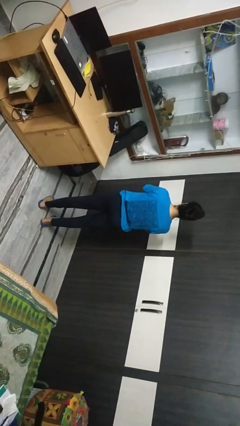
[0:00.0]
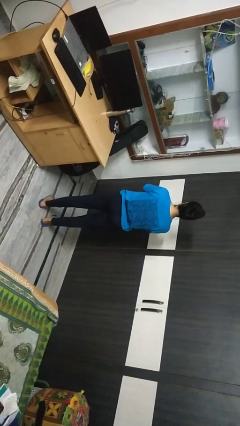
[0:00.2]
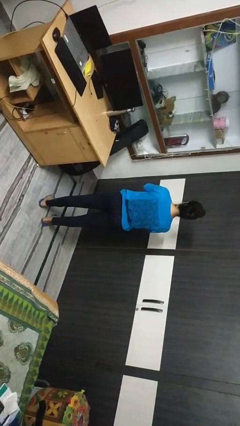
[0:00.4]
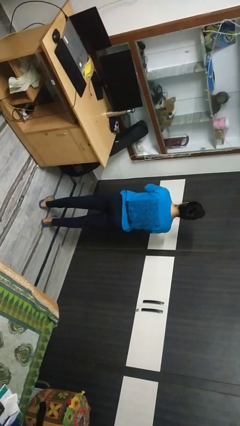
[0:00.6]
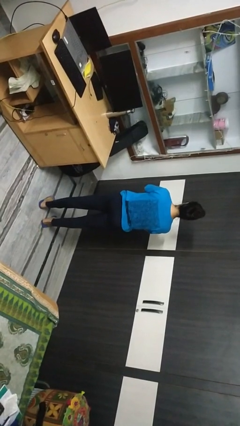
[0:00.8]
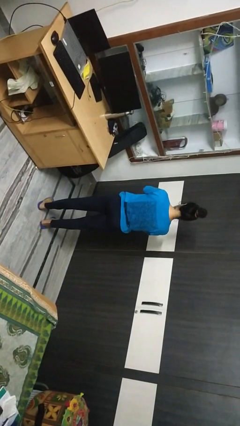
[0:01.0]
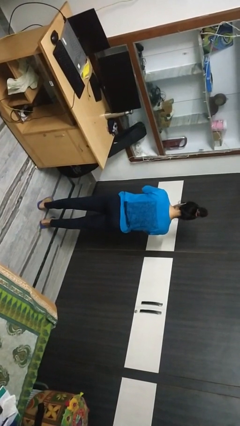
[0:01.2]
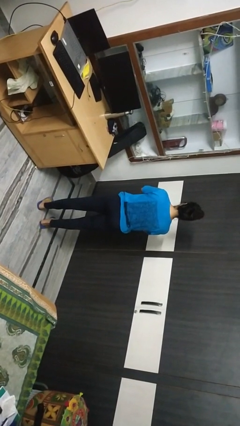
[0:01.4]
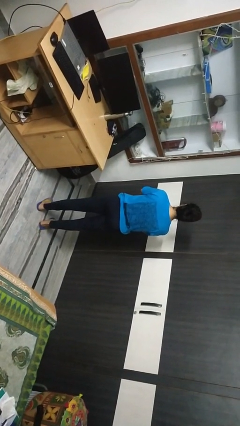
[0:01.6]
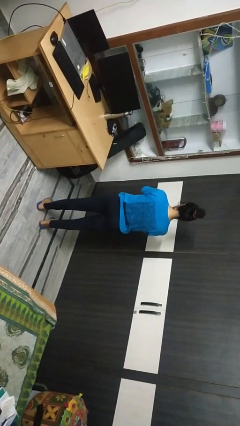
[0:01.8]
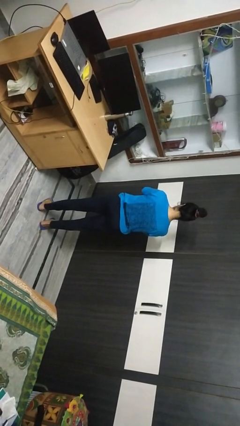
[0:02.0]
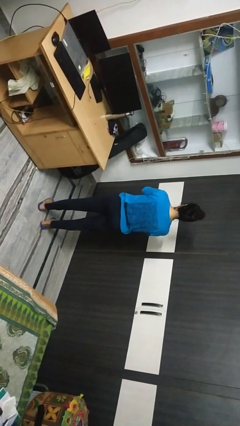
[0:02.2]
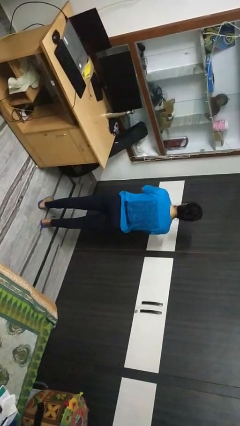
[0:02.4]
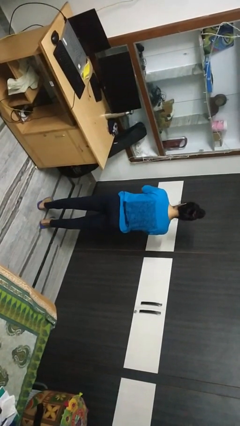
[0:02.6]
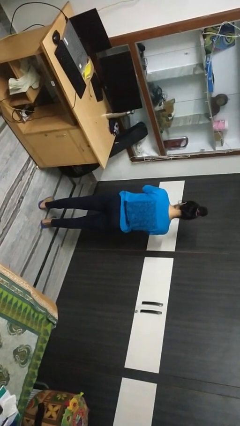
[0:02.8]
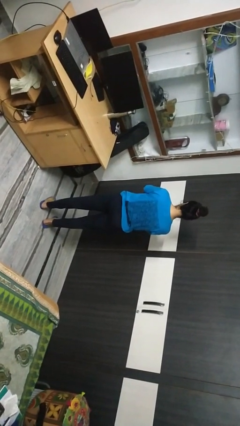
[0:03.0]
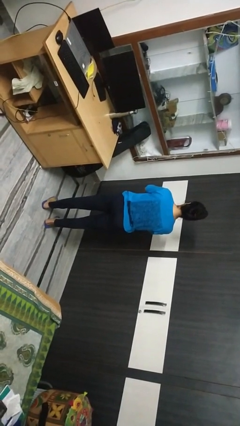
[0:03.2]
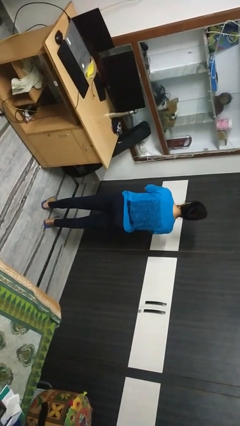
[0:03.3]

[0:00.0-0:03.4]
person nods head

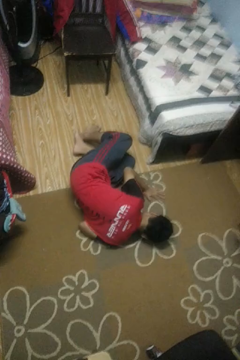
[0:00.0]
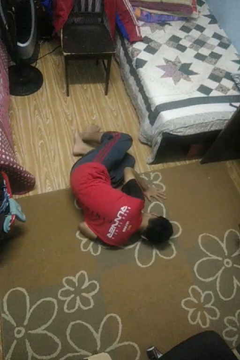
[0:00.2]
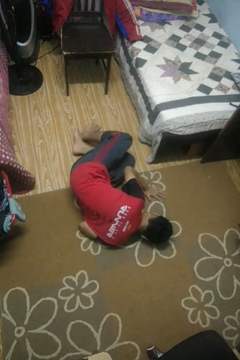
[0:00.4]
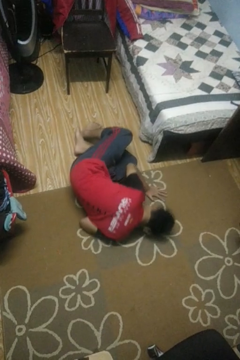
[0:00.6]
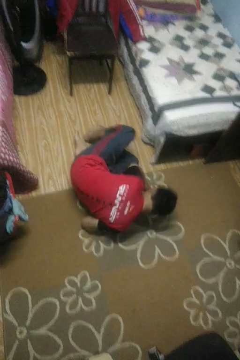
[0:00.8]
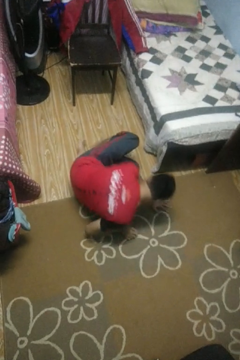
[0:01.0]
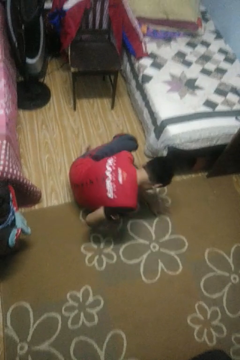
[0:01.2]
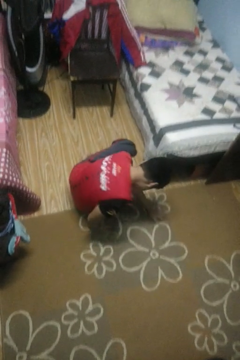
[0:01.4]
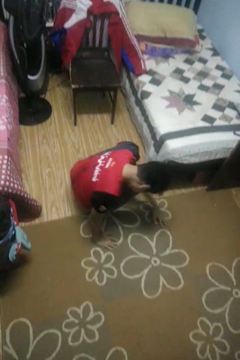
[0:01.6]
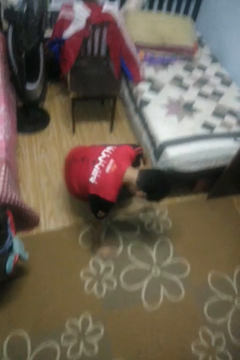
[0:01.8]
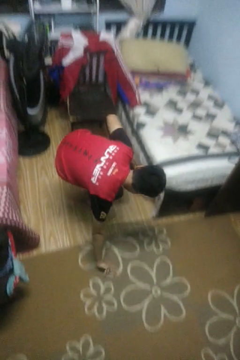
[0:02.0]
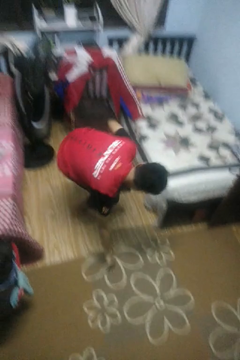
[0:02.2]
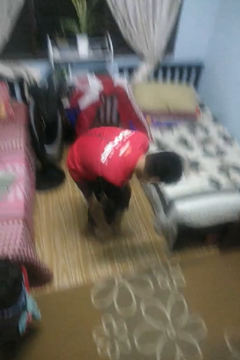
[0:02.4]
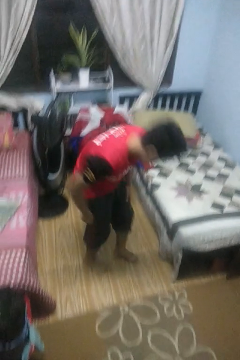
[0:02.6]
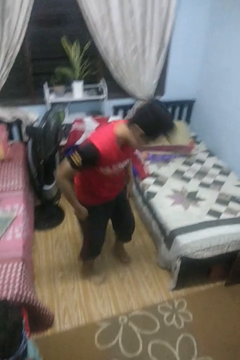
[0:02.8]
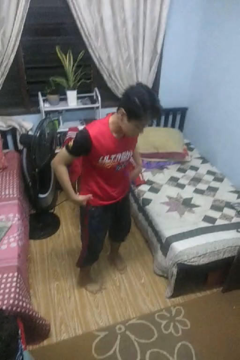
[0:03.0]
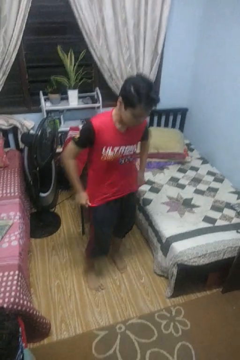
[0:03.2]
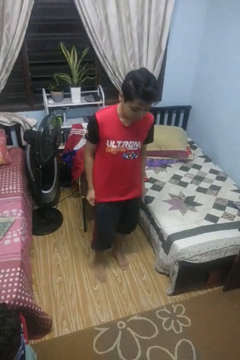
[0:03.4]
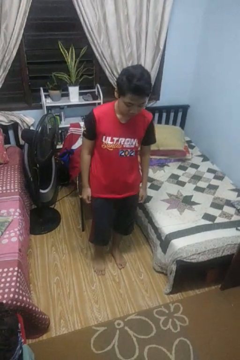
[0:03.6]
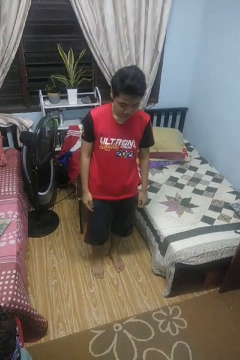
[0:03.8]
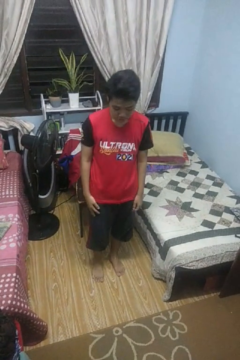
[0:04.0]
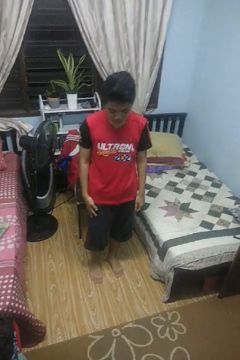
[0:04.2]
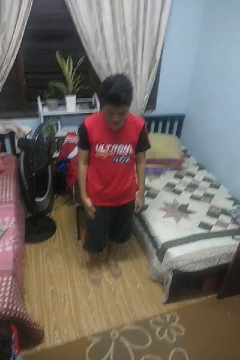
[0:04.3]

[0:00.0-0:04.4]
person stands up from floor

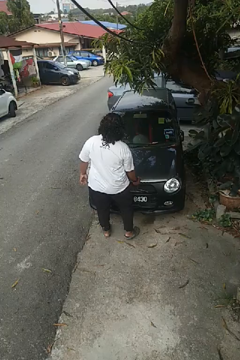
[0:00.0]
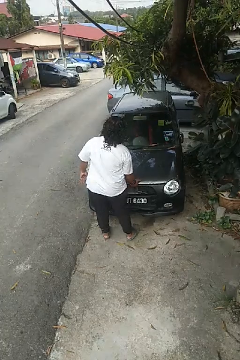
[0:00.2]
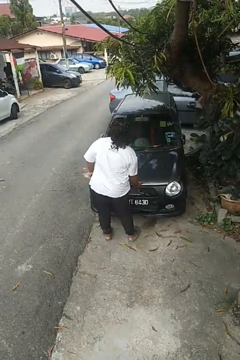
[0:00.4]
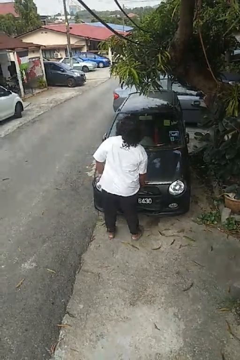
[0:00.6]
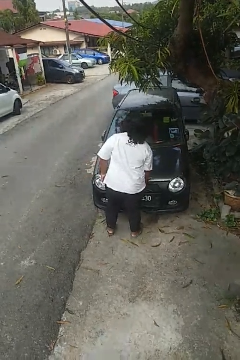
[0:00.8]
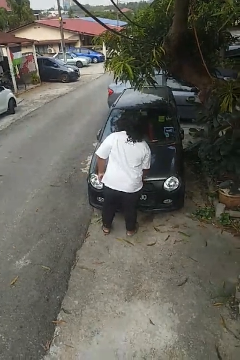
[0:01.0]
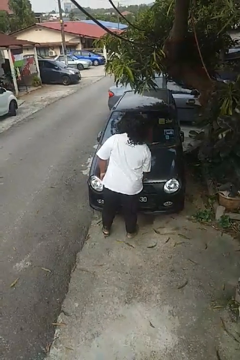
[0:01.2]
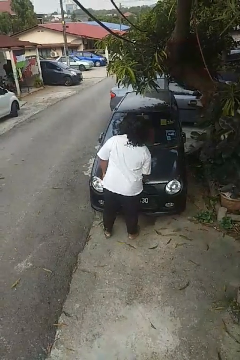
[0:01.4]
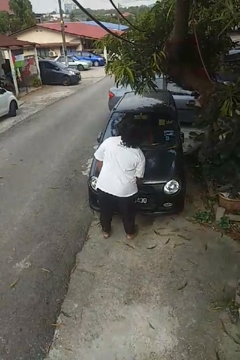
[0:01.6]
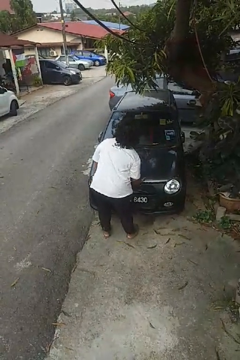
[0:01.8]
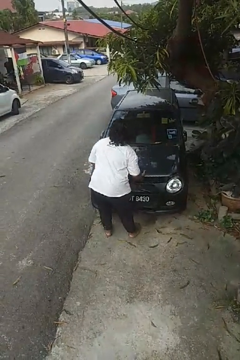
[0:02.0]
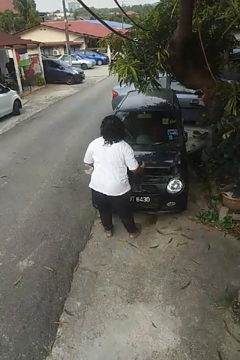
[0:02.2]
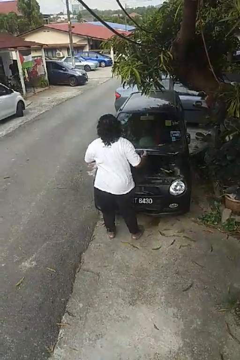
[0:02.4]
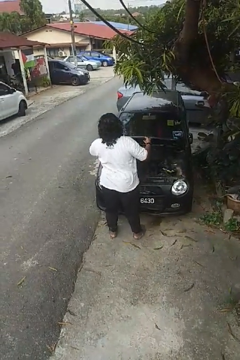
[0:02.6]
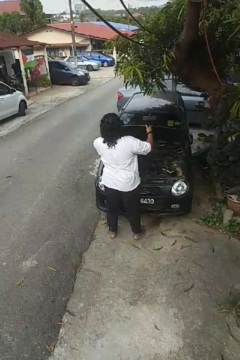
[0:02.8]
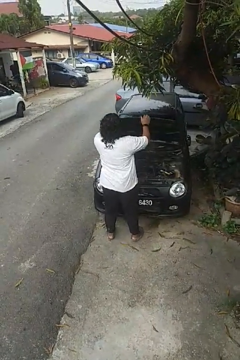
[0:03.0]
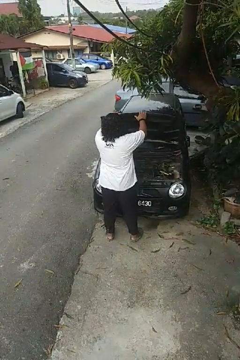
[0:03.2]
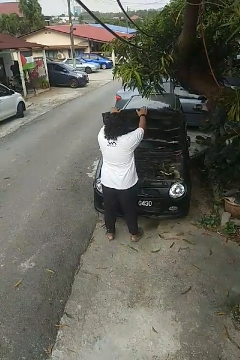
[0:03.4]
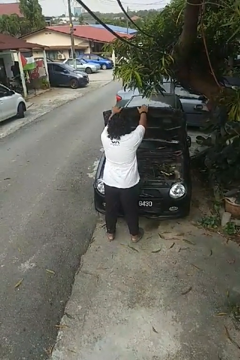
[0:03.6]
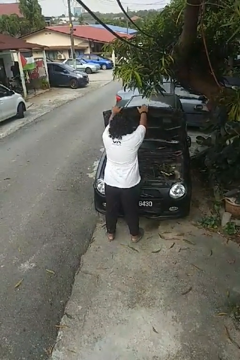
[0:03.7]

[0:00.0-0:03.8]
person opens car hood

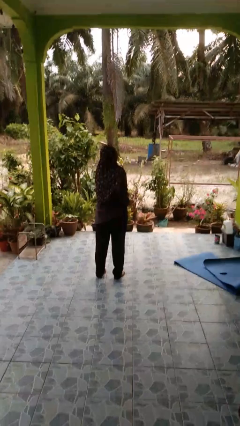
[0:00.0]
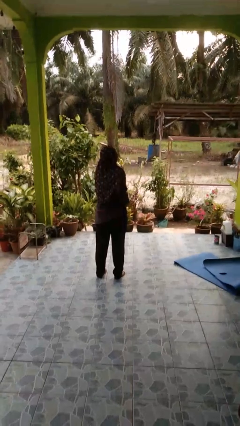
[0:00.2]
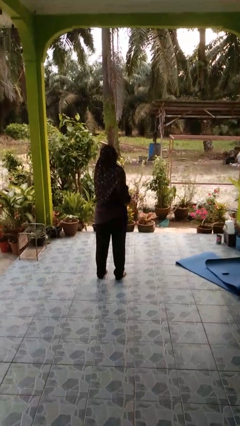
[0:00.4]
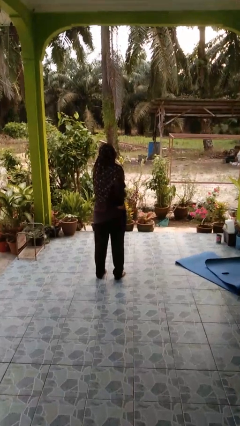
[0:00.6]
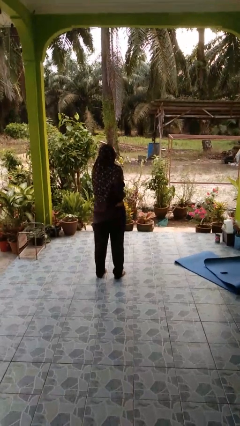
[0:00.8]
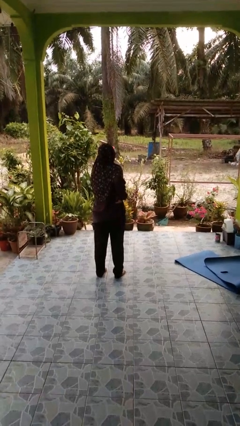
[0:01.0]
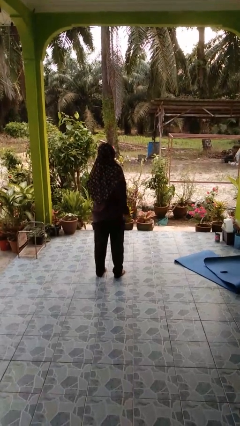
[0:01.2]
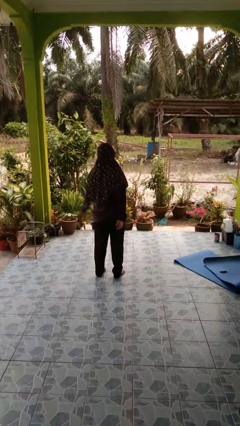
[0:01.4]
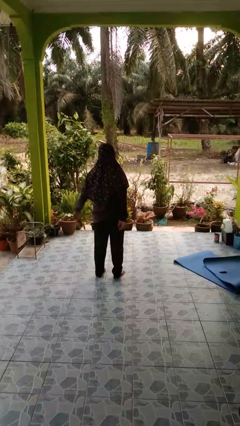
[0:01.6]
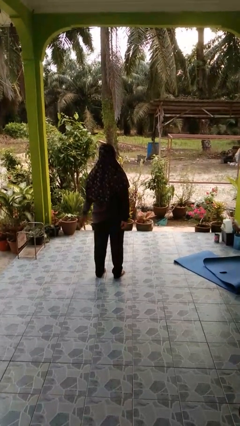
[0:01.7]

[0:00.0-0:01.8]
person tucks in shirt

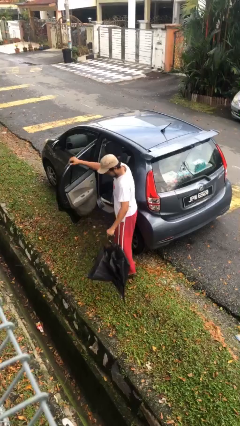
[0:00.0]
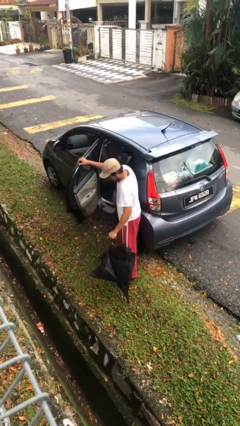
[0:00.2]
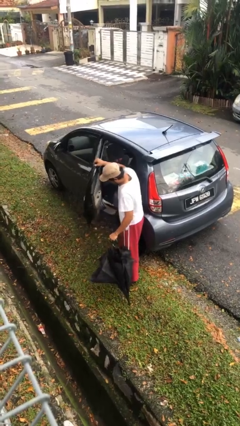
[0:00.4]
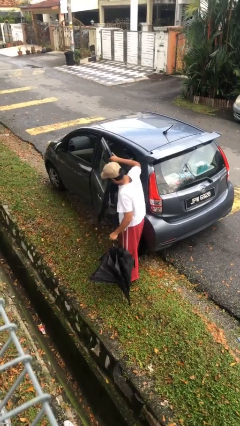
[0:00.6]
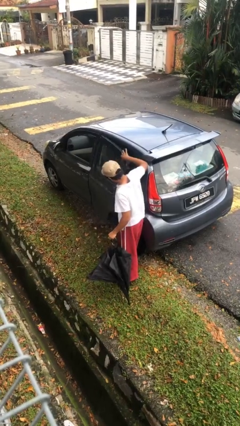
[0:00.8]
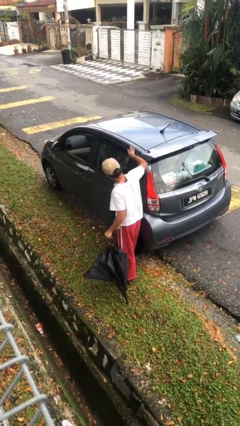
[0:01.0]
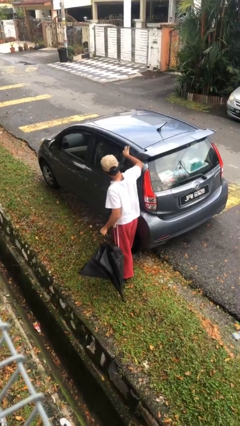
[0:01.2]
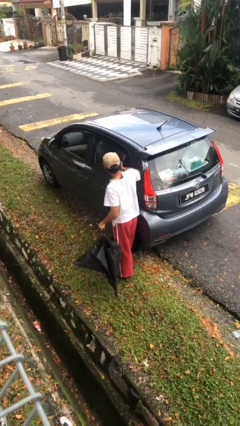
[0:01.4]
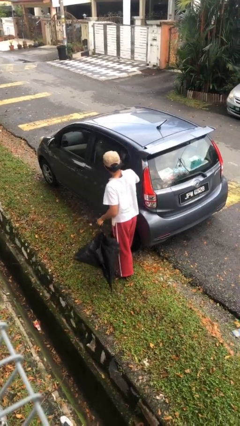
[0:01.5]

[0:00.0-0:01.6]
person closes car door

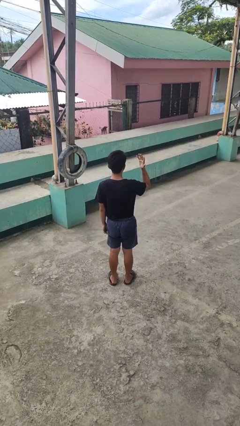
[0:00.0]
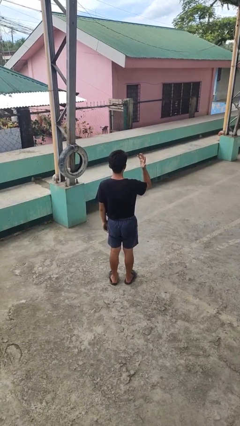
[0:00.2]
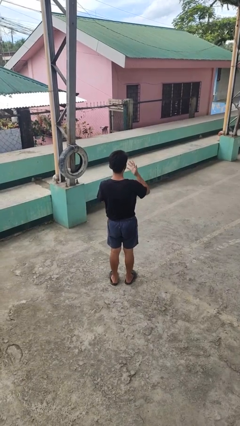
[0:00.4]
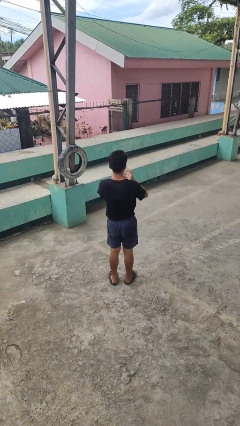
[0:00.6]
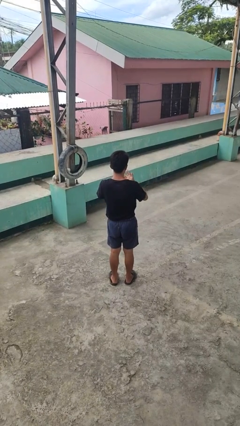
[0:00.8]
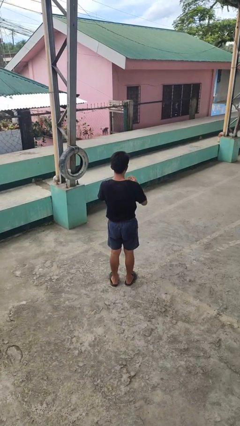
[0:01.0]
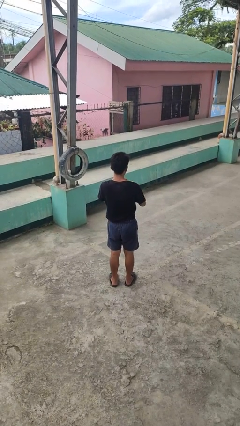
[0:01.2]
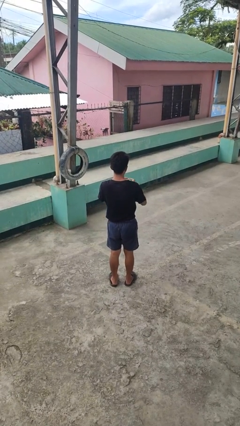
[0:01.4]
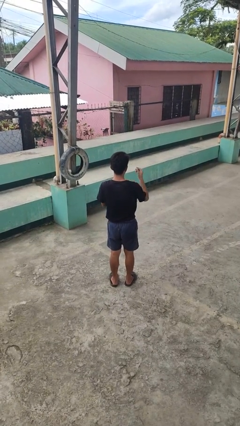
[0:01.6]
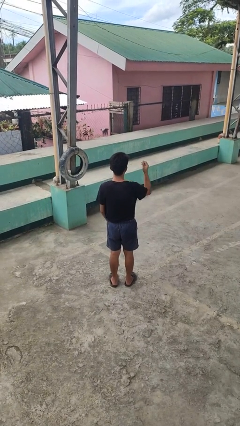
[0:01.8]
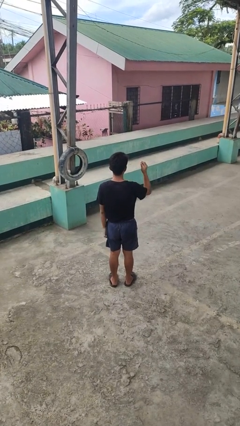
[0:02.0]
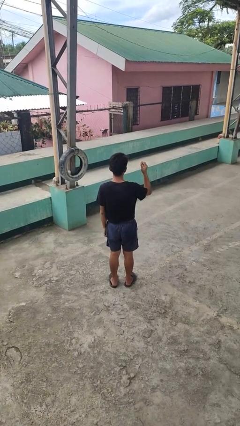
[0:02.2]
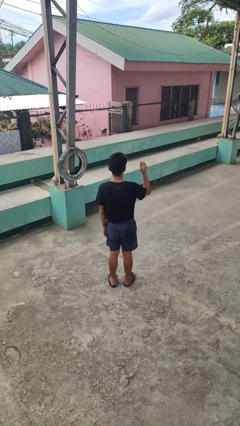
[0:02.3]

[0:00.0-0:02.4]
person takes off ring

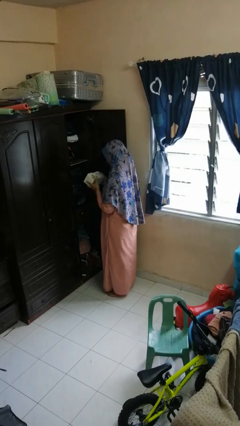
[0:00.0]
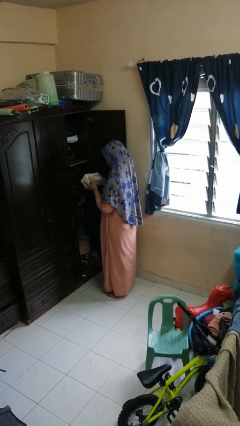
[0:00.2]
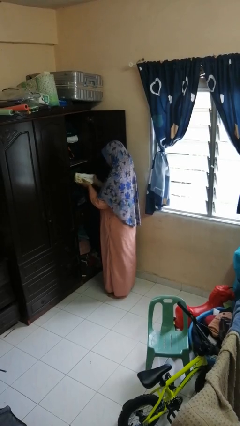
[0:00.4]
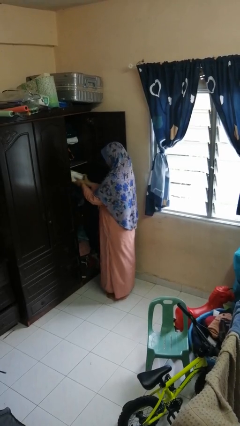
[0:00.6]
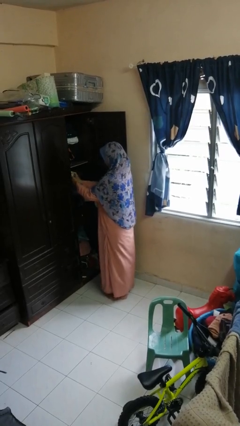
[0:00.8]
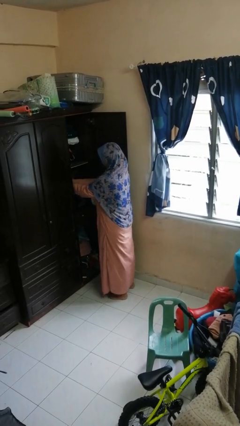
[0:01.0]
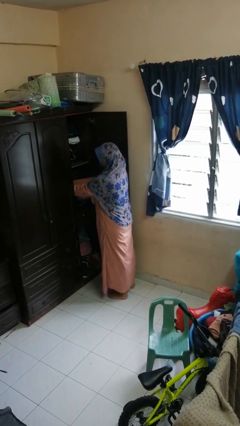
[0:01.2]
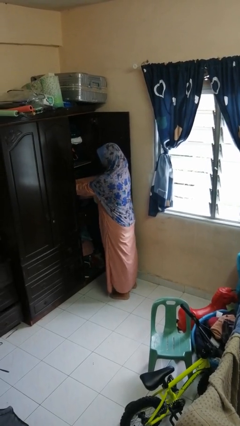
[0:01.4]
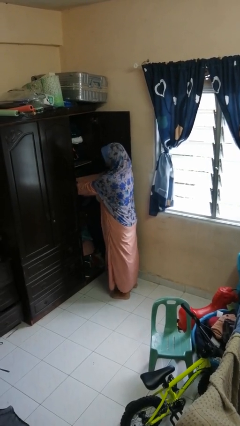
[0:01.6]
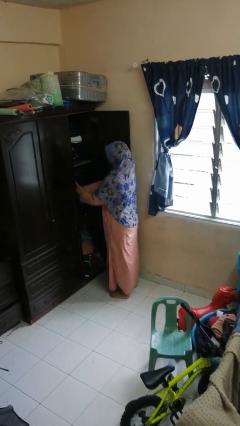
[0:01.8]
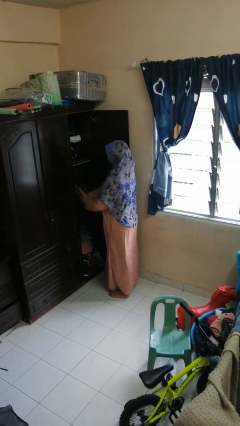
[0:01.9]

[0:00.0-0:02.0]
person puts down object into cabinet
